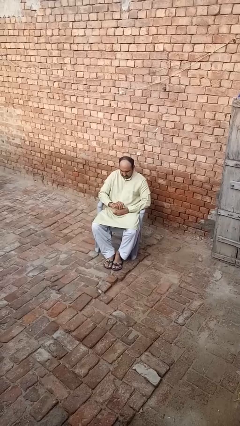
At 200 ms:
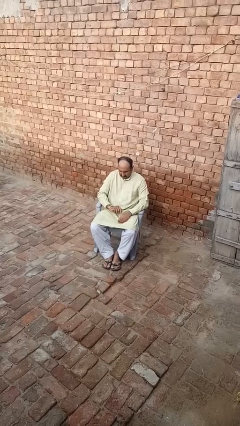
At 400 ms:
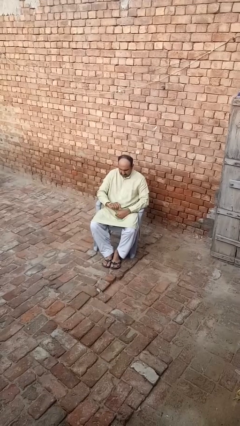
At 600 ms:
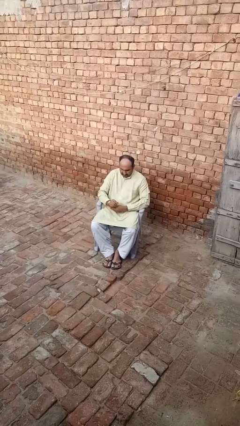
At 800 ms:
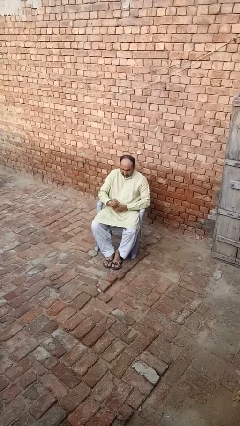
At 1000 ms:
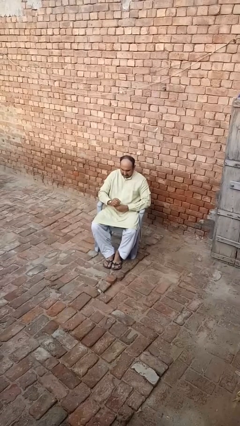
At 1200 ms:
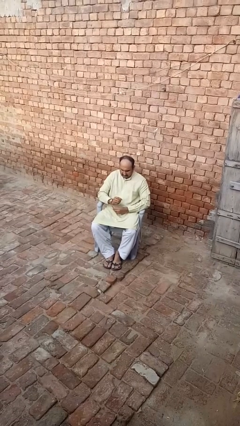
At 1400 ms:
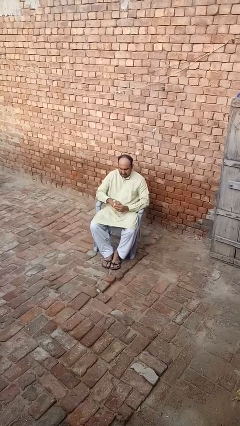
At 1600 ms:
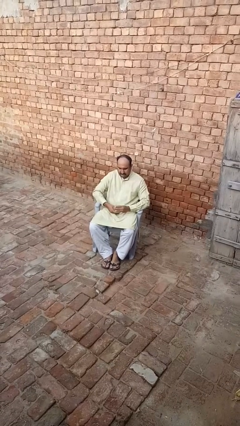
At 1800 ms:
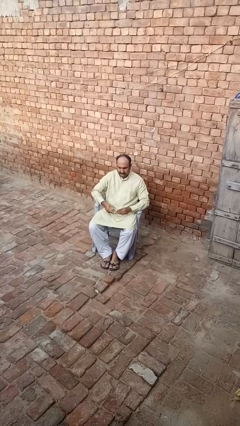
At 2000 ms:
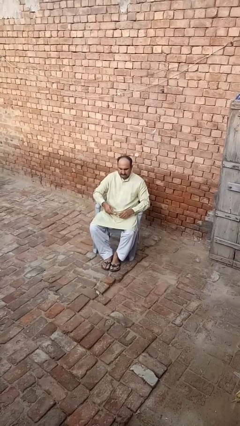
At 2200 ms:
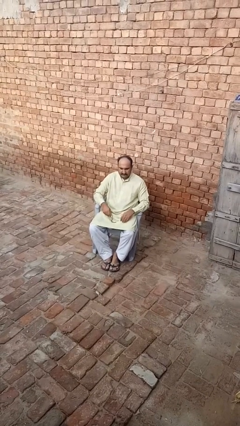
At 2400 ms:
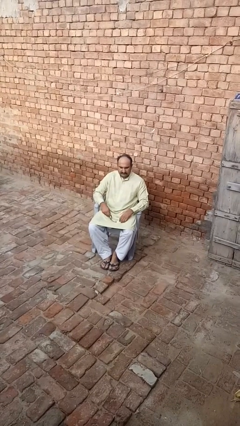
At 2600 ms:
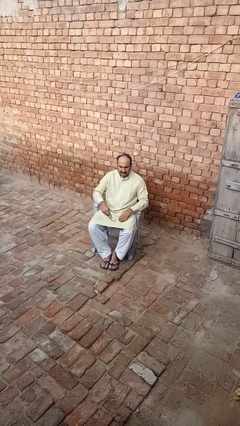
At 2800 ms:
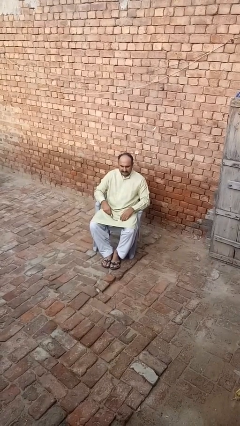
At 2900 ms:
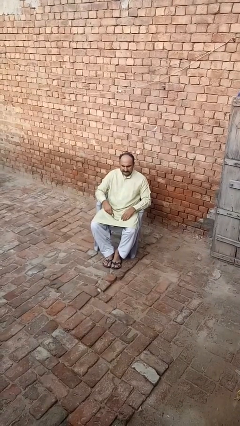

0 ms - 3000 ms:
person takes off wristwatch

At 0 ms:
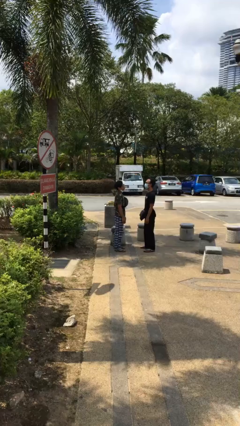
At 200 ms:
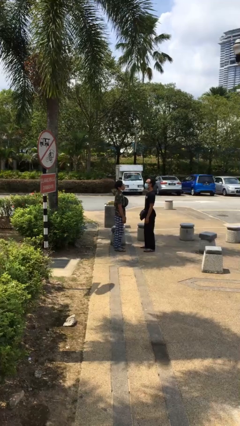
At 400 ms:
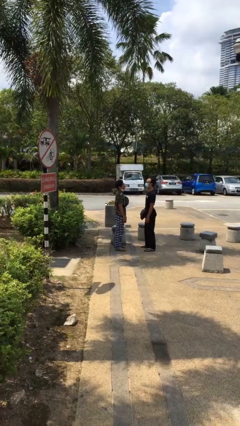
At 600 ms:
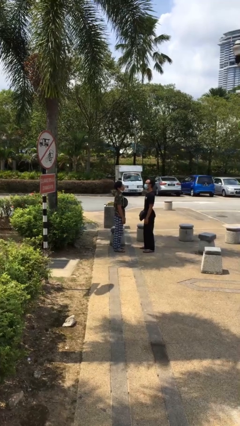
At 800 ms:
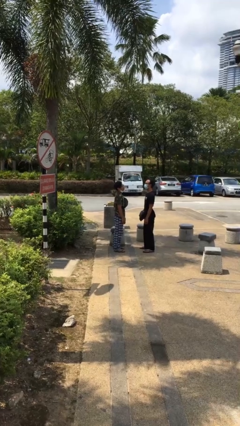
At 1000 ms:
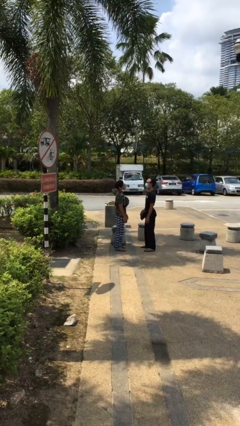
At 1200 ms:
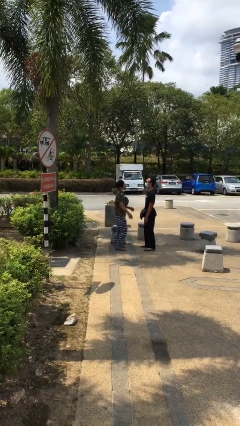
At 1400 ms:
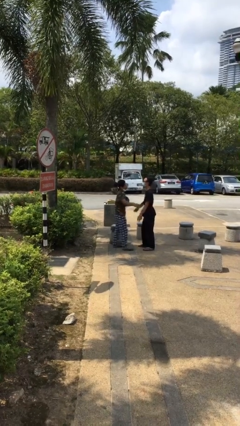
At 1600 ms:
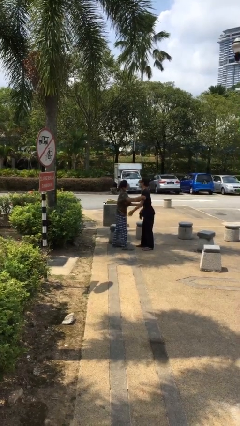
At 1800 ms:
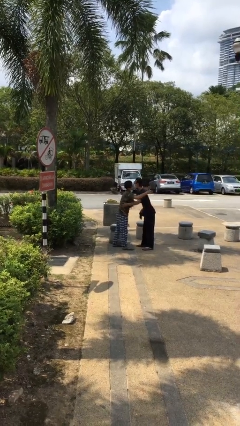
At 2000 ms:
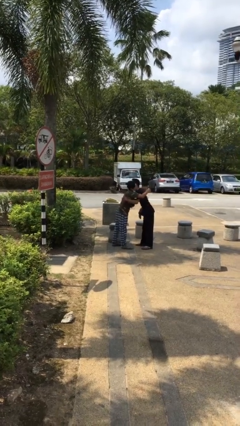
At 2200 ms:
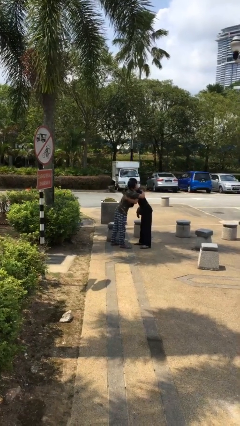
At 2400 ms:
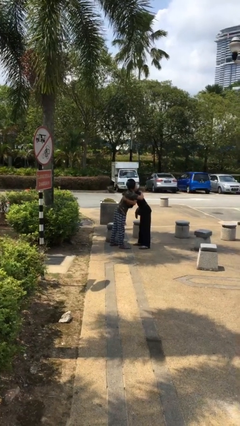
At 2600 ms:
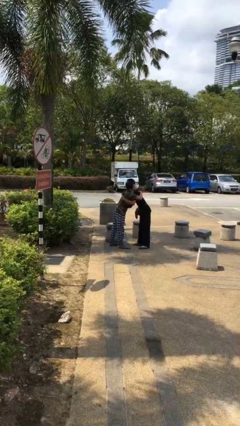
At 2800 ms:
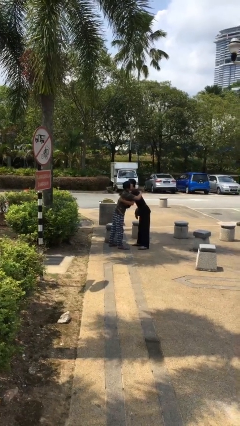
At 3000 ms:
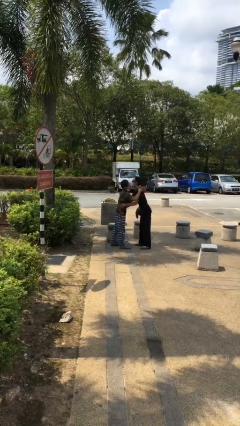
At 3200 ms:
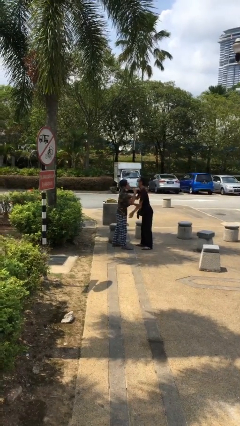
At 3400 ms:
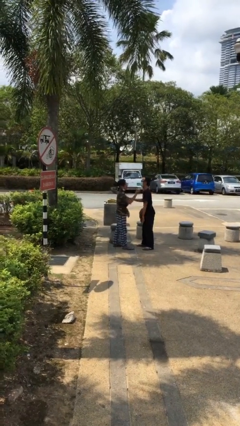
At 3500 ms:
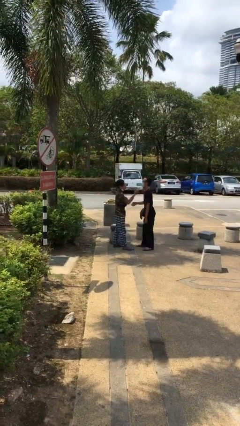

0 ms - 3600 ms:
person embraces person

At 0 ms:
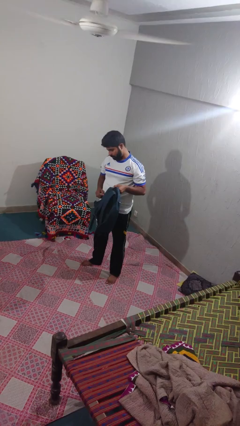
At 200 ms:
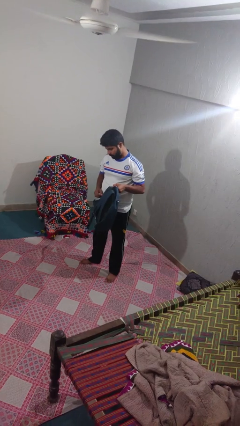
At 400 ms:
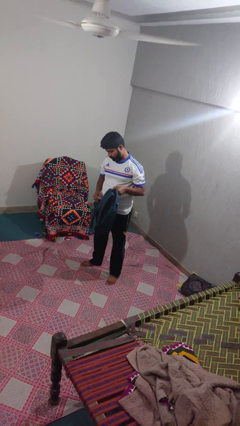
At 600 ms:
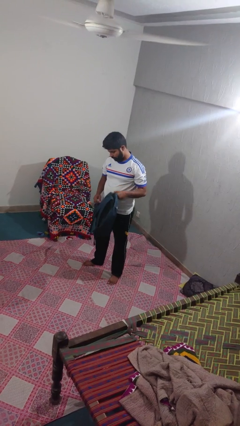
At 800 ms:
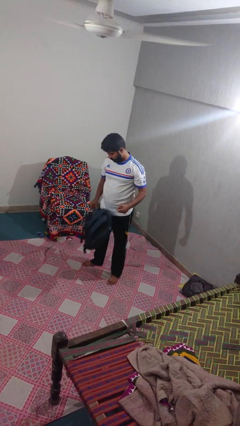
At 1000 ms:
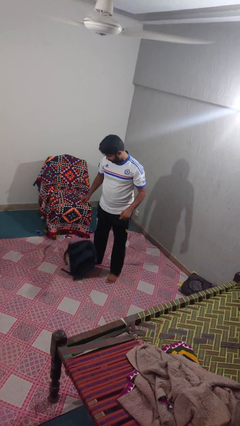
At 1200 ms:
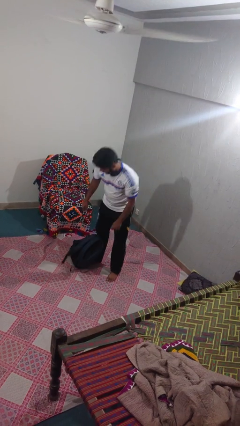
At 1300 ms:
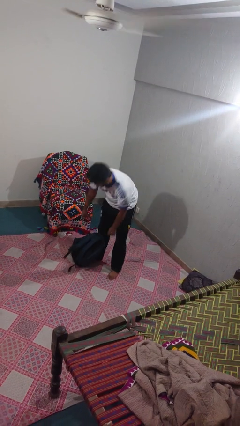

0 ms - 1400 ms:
person drops object

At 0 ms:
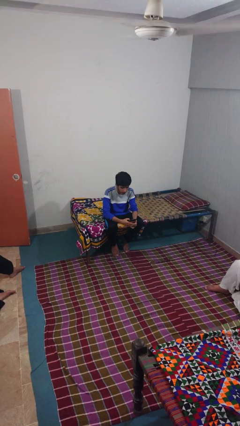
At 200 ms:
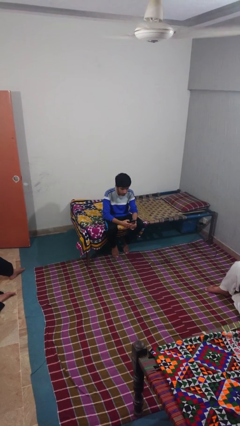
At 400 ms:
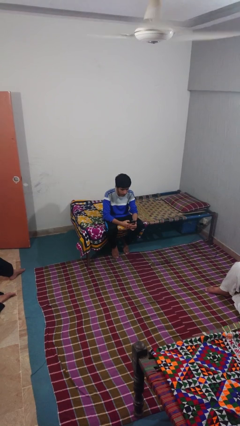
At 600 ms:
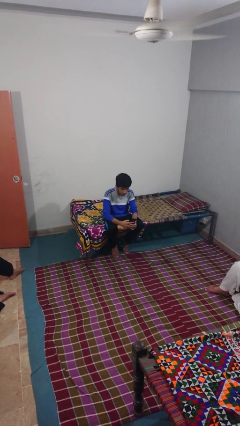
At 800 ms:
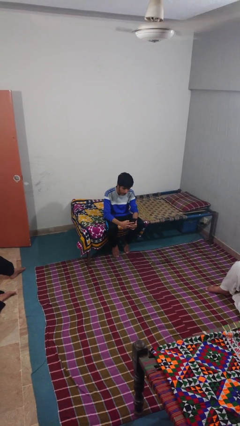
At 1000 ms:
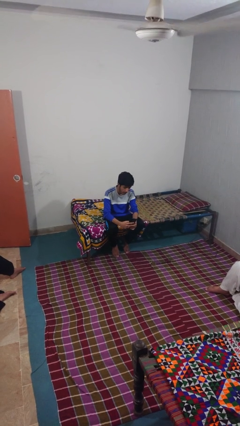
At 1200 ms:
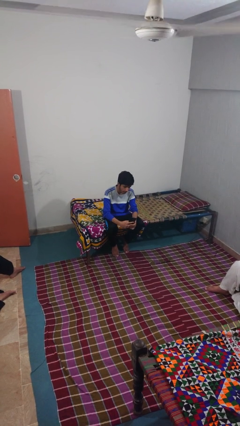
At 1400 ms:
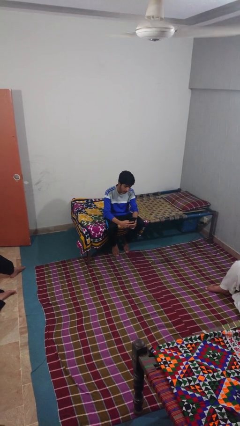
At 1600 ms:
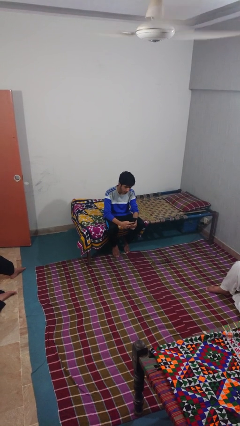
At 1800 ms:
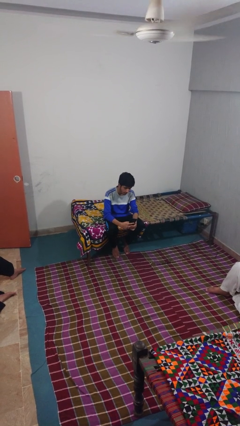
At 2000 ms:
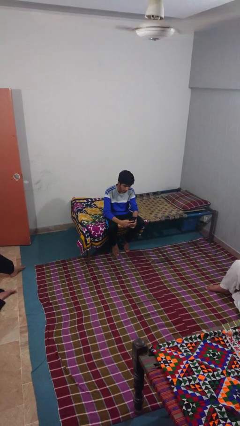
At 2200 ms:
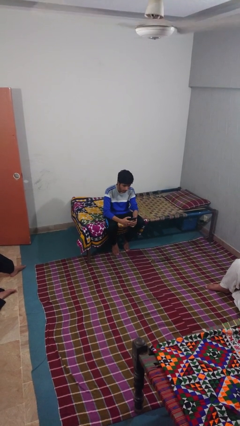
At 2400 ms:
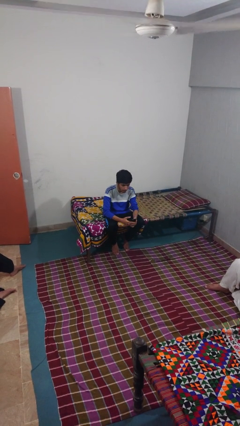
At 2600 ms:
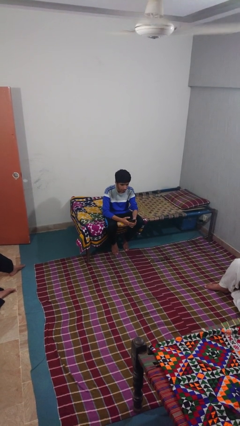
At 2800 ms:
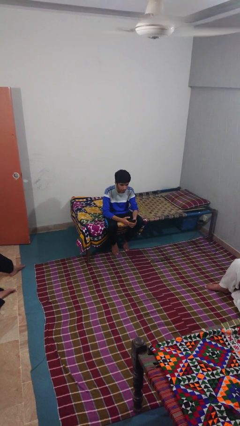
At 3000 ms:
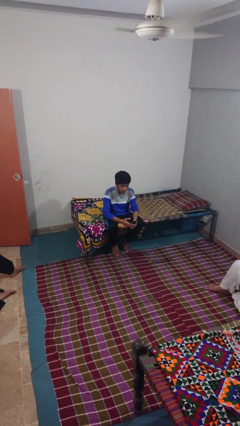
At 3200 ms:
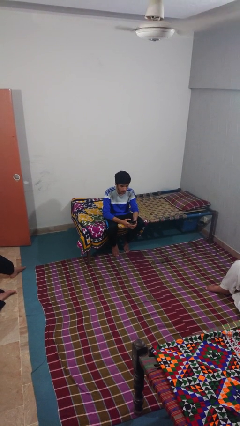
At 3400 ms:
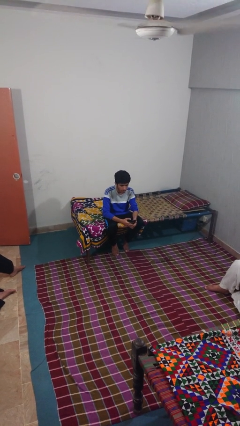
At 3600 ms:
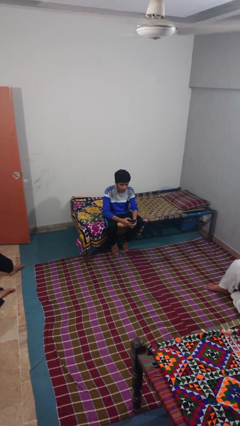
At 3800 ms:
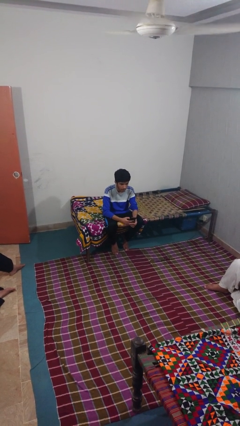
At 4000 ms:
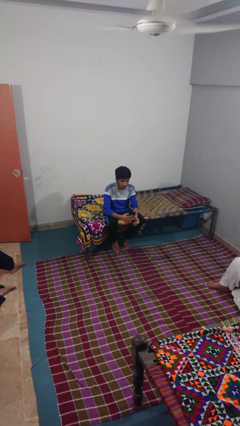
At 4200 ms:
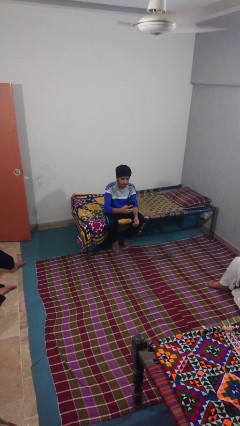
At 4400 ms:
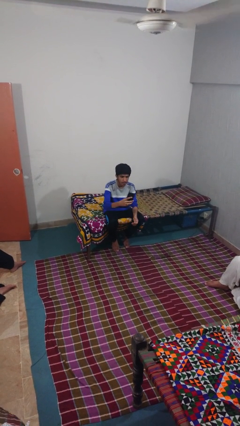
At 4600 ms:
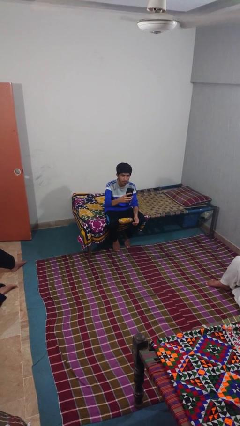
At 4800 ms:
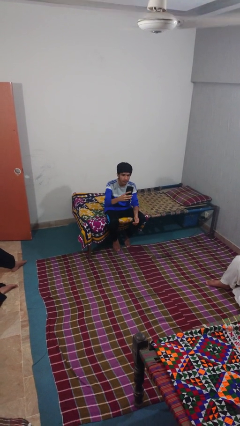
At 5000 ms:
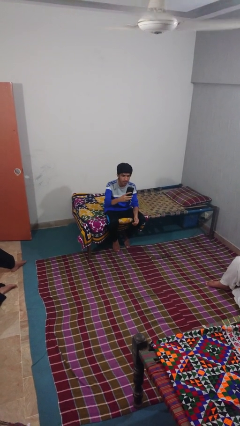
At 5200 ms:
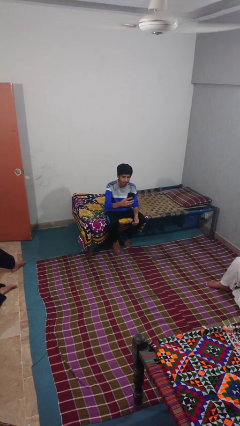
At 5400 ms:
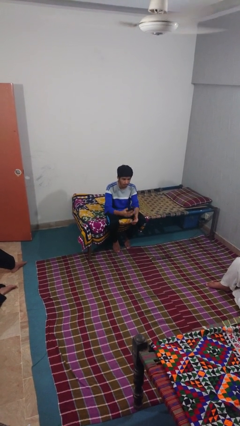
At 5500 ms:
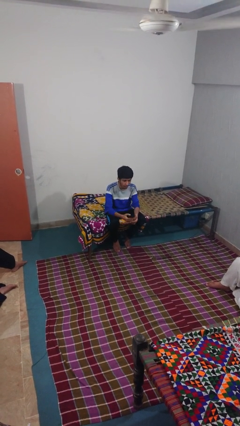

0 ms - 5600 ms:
person takes selfie

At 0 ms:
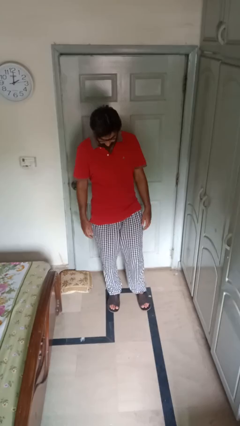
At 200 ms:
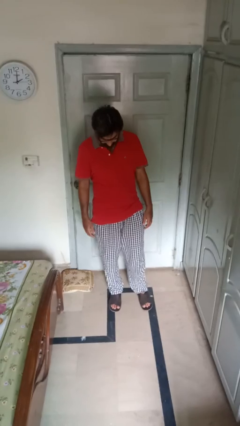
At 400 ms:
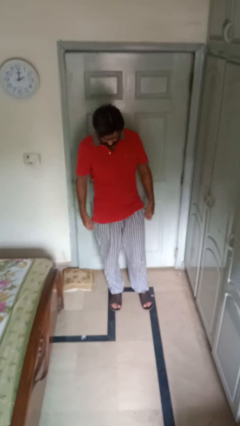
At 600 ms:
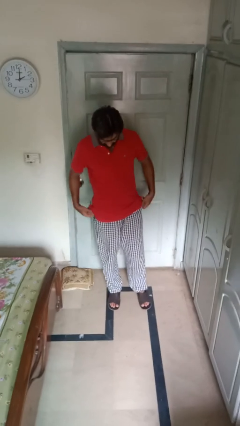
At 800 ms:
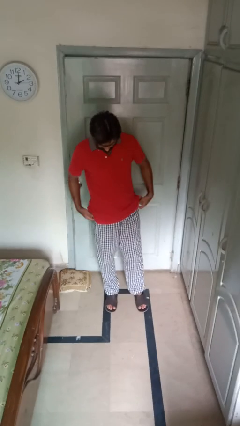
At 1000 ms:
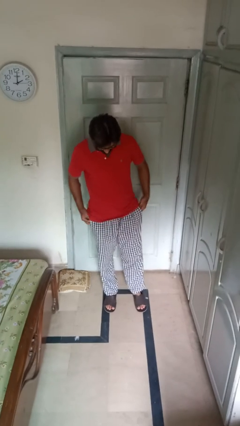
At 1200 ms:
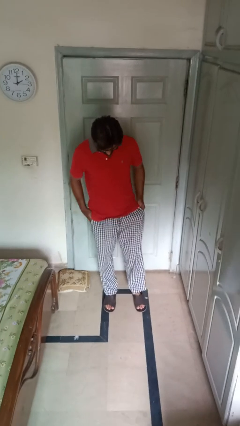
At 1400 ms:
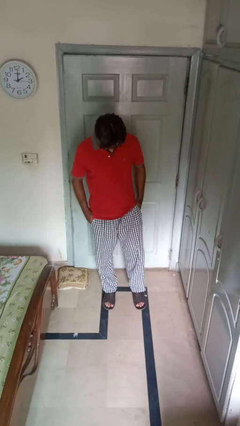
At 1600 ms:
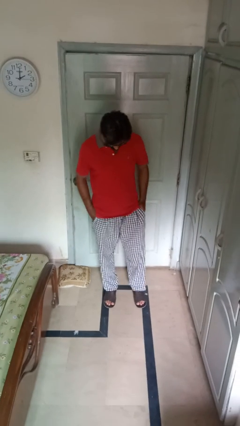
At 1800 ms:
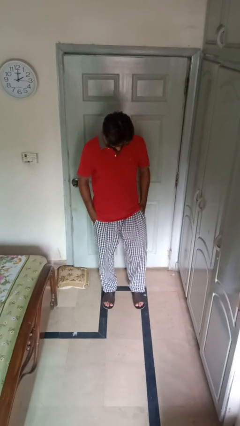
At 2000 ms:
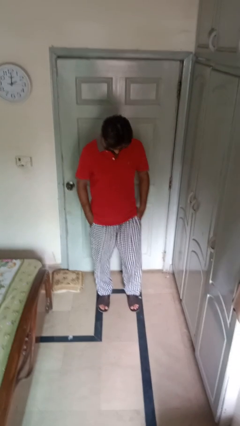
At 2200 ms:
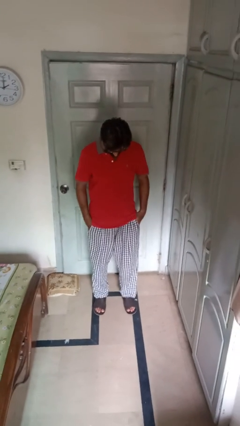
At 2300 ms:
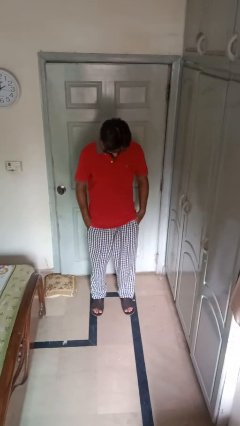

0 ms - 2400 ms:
person puts hands in back pockets

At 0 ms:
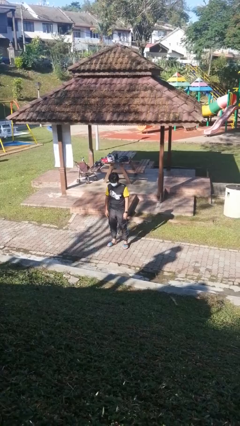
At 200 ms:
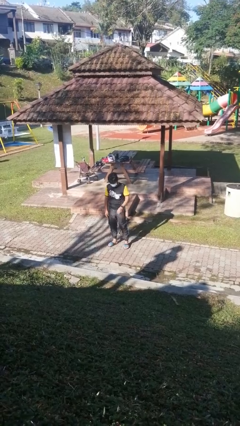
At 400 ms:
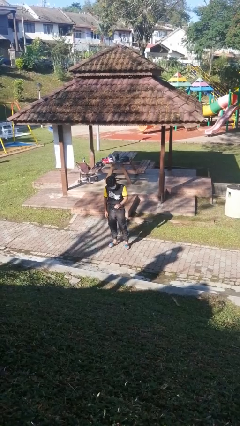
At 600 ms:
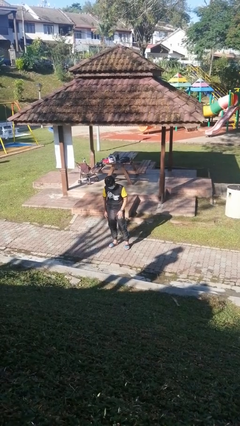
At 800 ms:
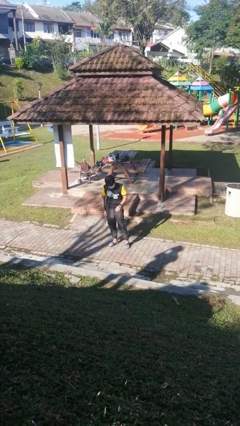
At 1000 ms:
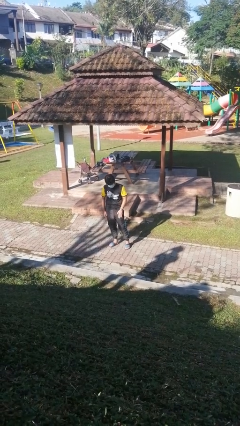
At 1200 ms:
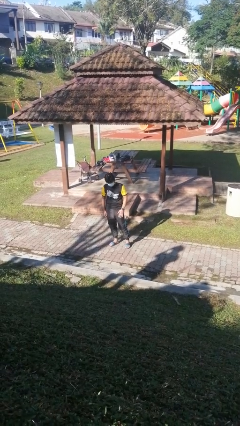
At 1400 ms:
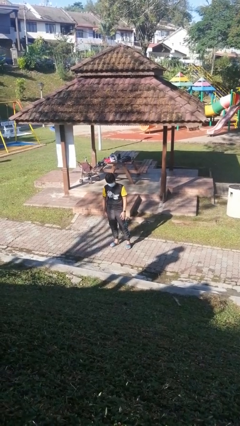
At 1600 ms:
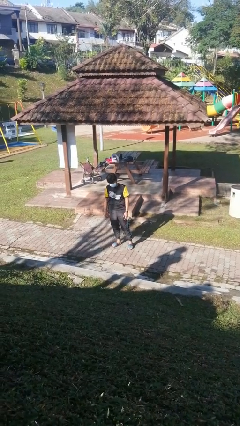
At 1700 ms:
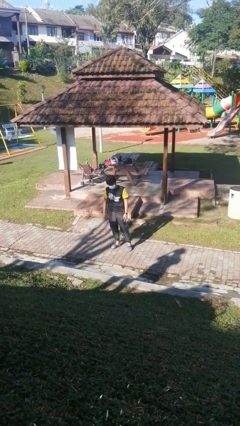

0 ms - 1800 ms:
person slaps hands on thighs
